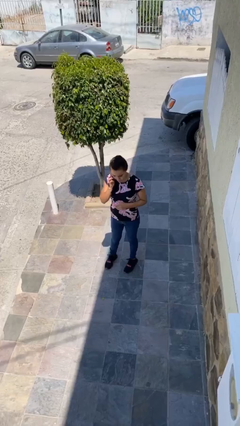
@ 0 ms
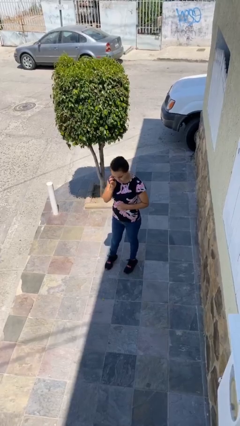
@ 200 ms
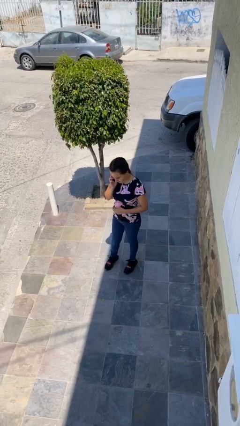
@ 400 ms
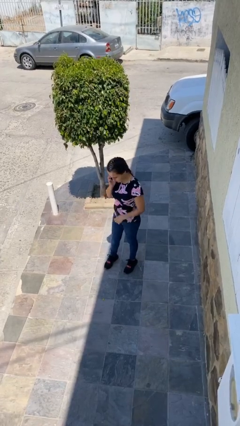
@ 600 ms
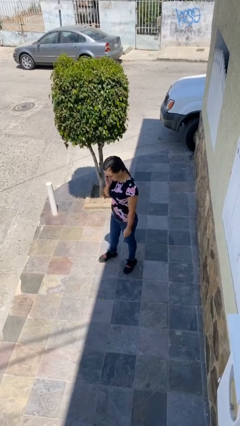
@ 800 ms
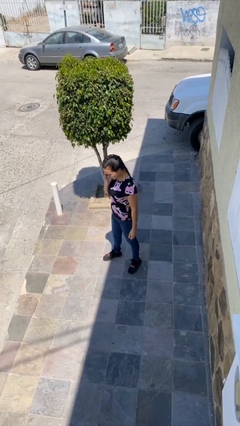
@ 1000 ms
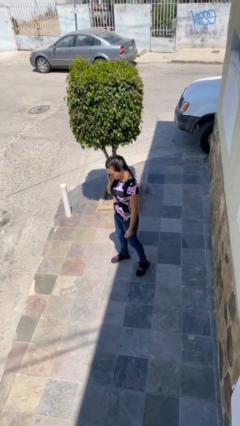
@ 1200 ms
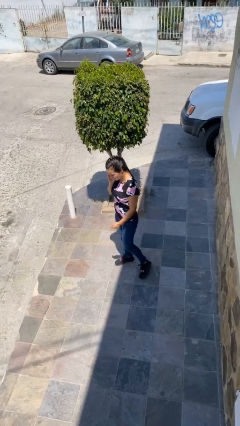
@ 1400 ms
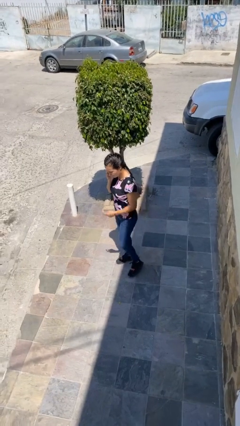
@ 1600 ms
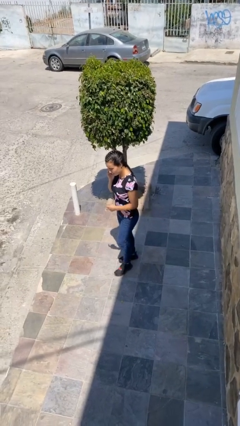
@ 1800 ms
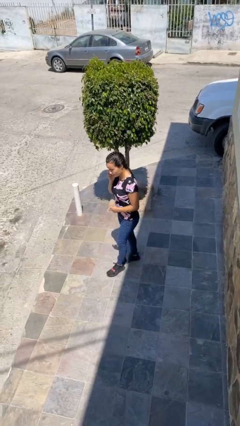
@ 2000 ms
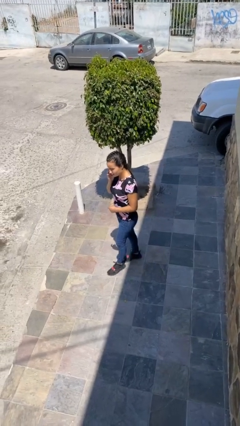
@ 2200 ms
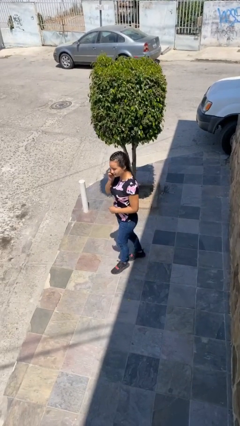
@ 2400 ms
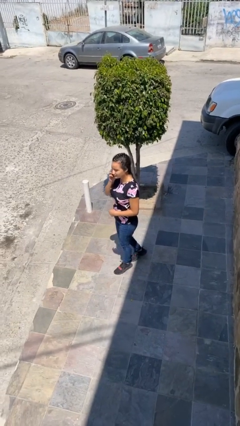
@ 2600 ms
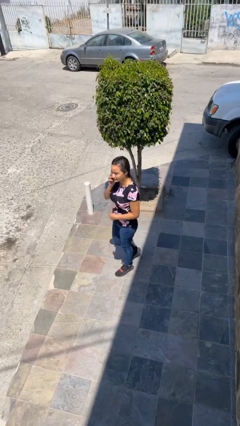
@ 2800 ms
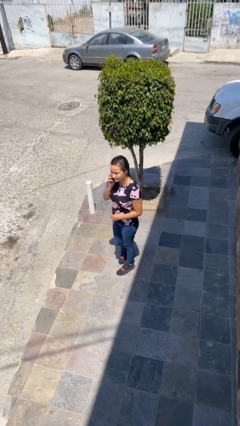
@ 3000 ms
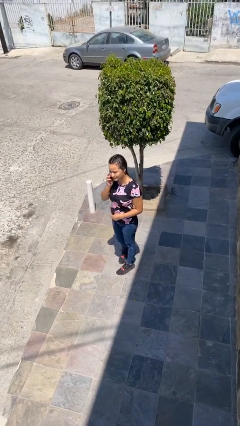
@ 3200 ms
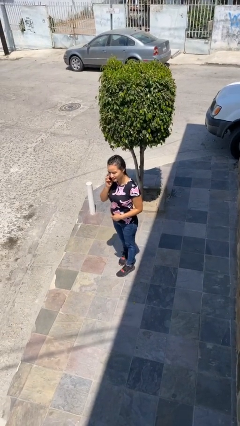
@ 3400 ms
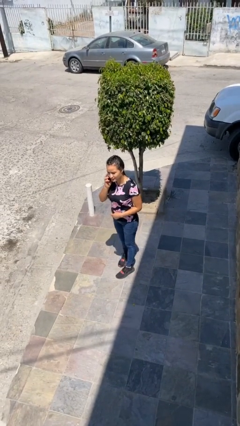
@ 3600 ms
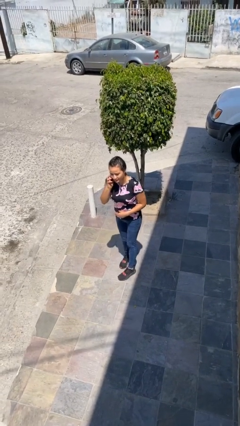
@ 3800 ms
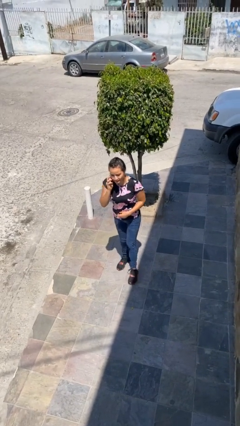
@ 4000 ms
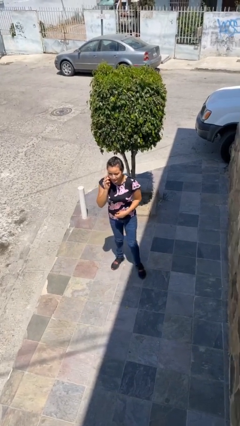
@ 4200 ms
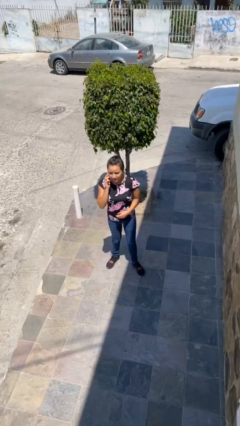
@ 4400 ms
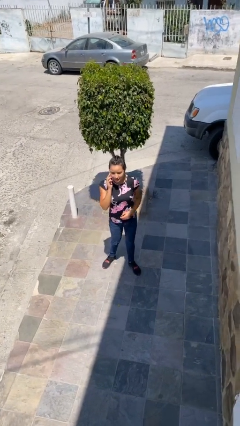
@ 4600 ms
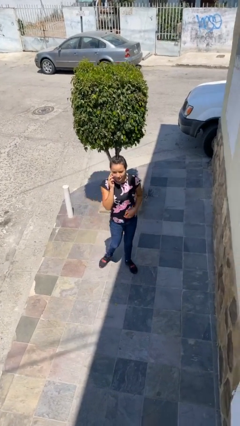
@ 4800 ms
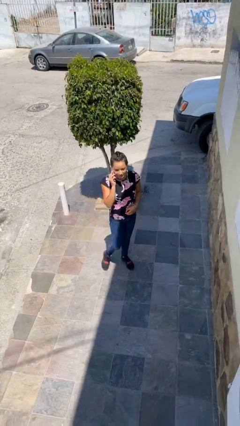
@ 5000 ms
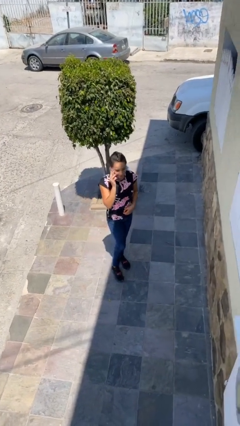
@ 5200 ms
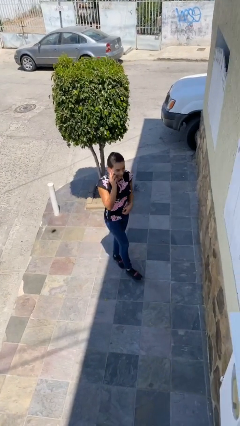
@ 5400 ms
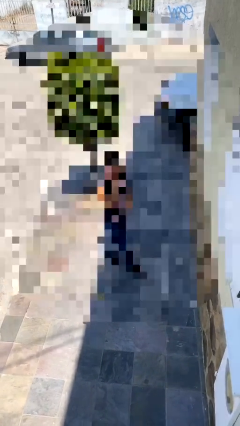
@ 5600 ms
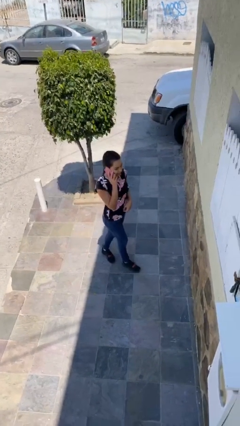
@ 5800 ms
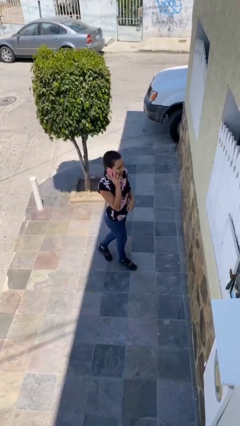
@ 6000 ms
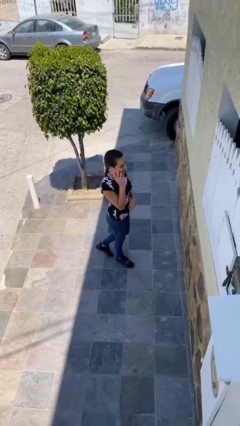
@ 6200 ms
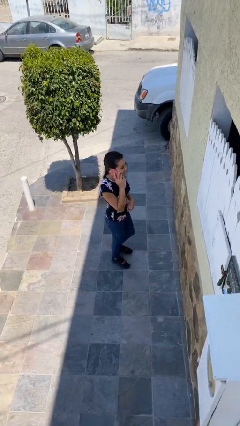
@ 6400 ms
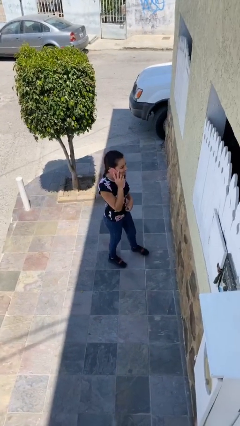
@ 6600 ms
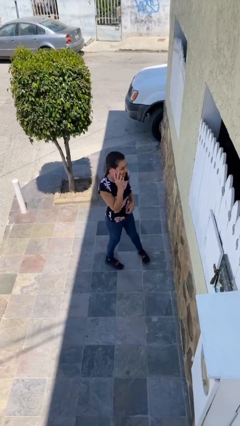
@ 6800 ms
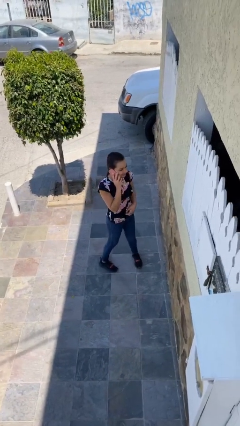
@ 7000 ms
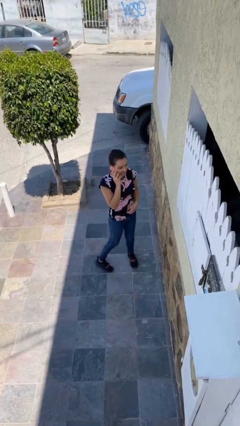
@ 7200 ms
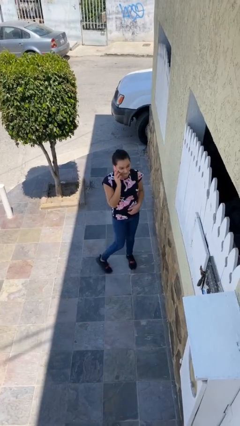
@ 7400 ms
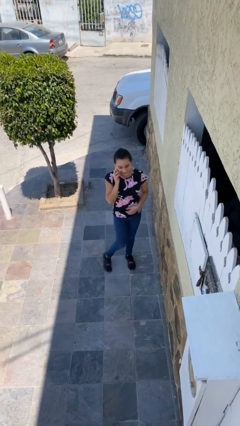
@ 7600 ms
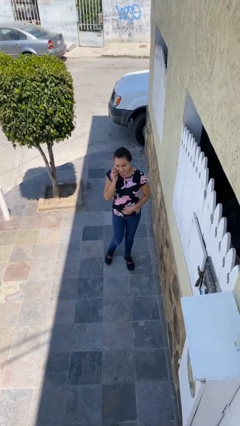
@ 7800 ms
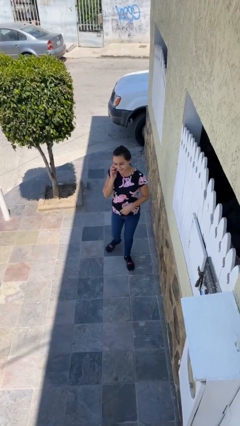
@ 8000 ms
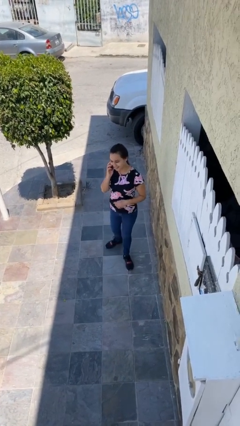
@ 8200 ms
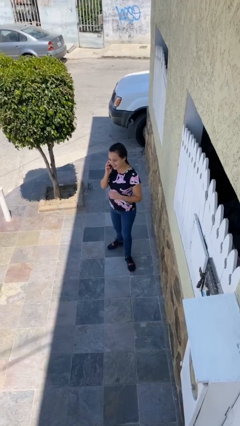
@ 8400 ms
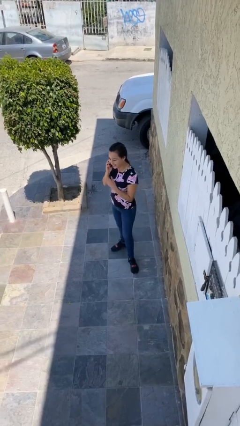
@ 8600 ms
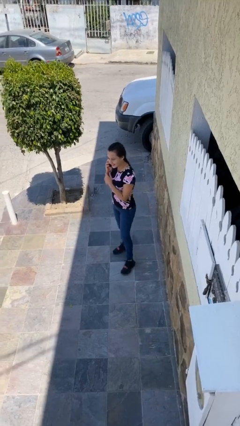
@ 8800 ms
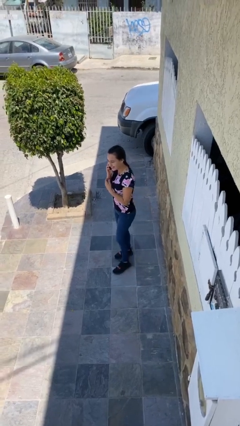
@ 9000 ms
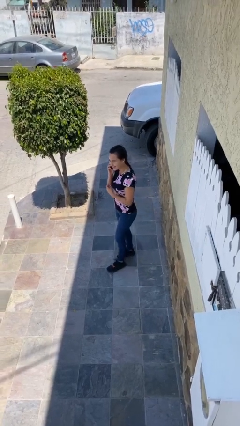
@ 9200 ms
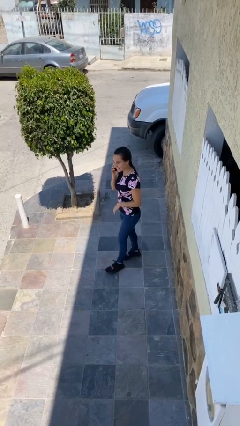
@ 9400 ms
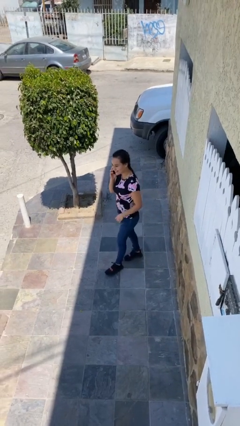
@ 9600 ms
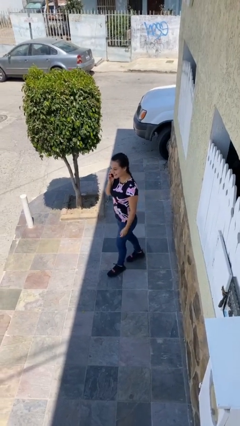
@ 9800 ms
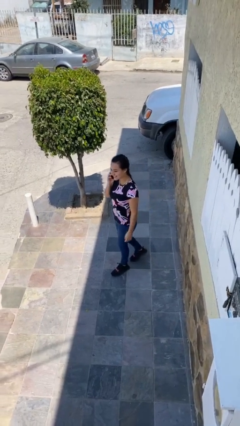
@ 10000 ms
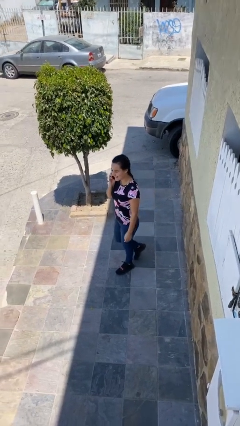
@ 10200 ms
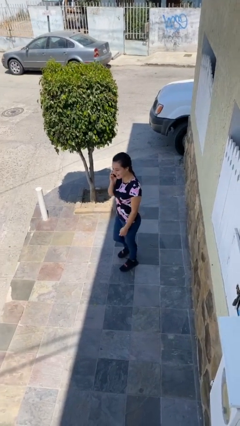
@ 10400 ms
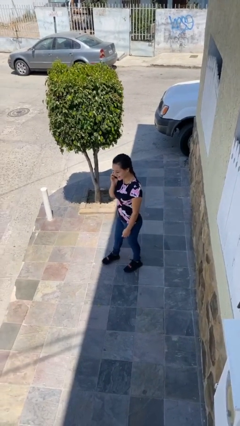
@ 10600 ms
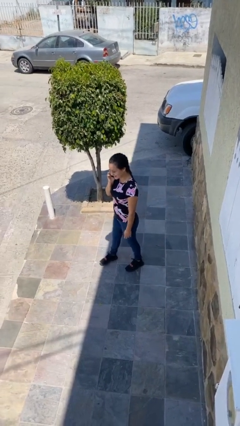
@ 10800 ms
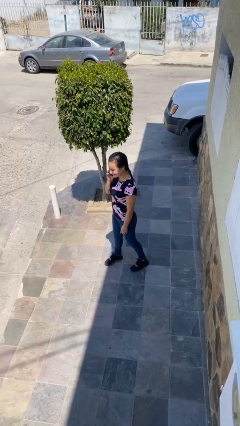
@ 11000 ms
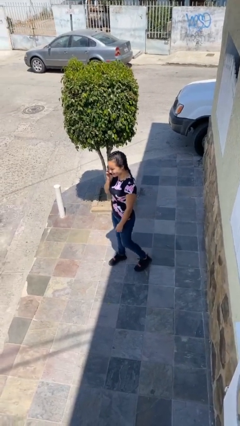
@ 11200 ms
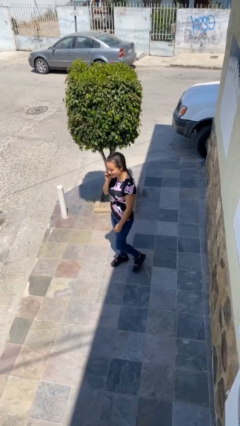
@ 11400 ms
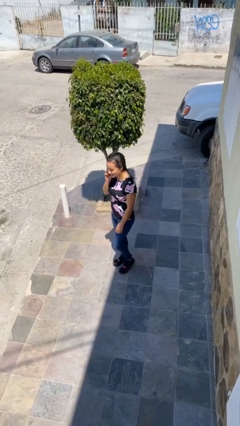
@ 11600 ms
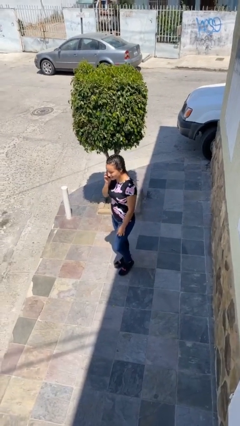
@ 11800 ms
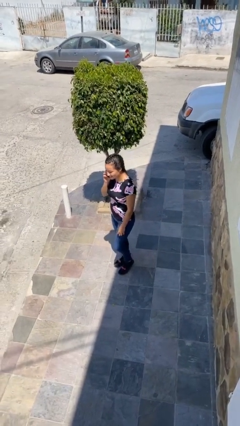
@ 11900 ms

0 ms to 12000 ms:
person talks on phone

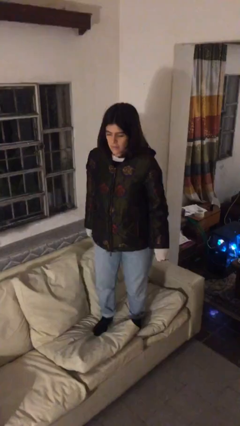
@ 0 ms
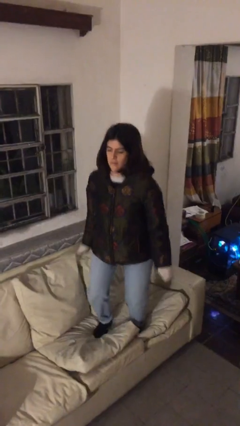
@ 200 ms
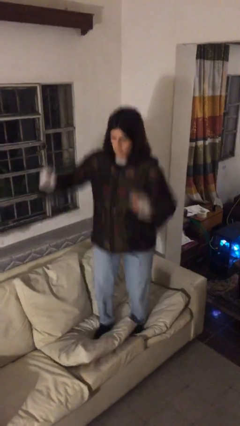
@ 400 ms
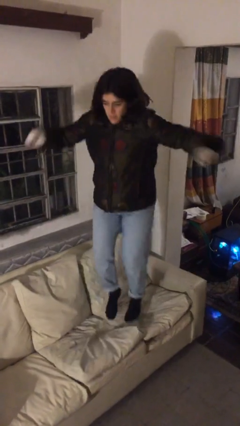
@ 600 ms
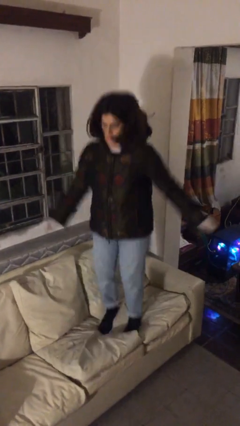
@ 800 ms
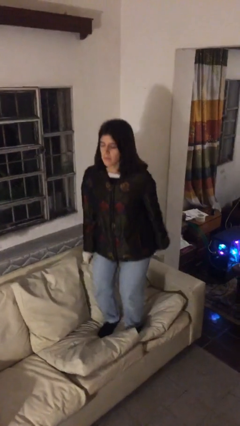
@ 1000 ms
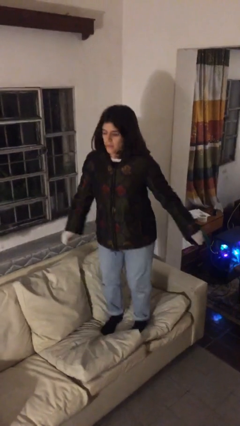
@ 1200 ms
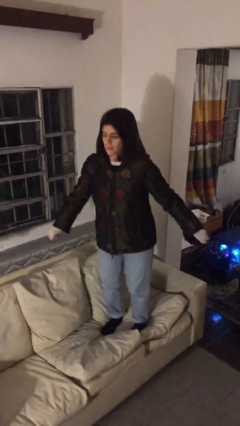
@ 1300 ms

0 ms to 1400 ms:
person jumps on couch

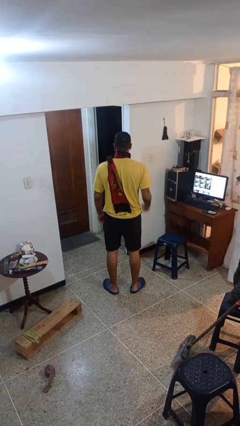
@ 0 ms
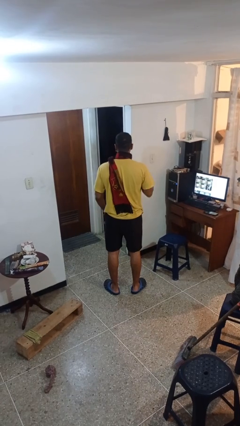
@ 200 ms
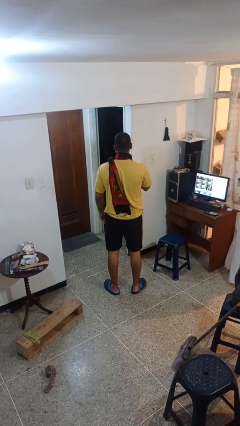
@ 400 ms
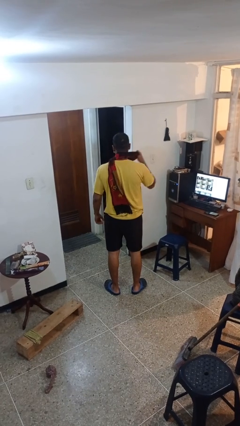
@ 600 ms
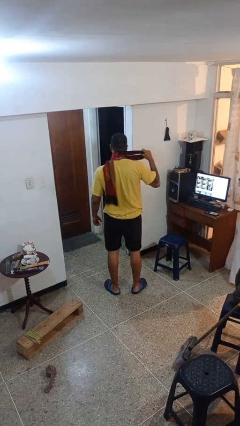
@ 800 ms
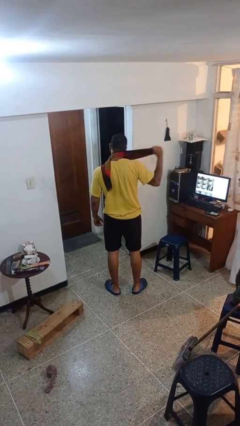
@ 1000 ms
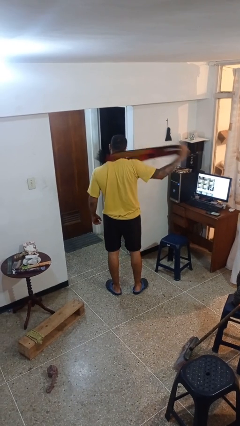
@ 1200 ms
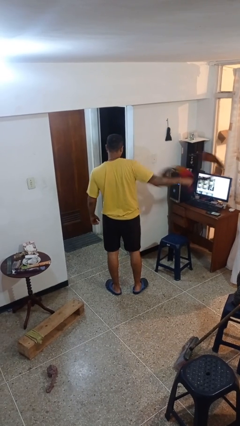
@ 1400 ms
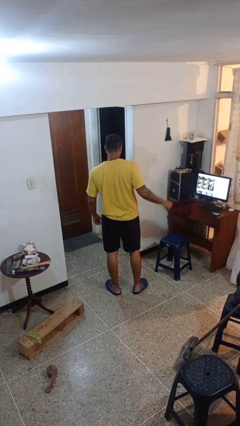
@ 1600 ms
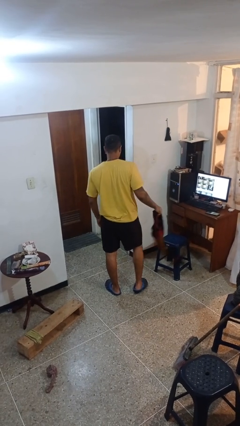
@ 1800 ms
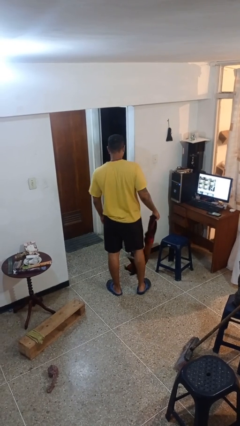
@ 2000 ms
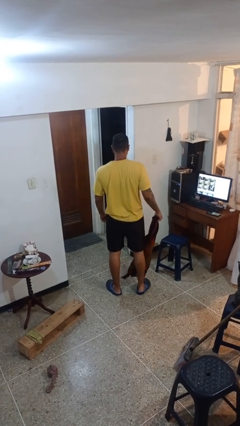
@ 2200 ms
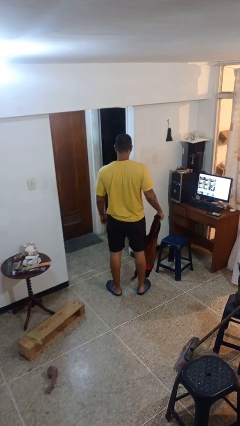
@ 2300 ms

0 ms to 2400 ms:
person takes off scarf

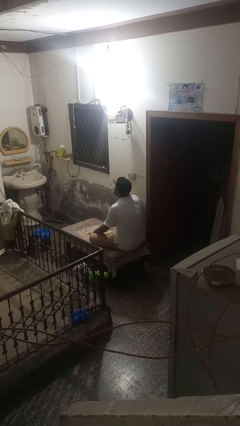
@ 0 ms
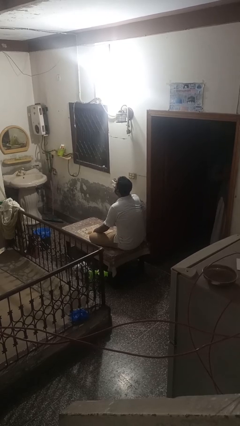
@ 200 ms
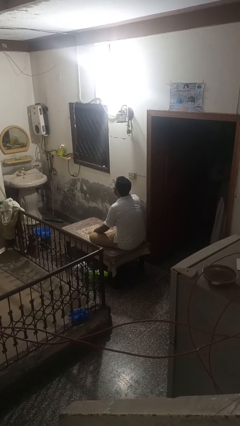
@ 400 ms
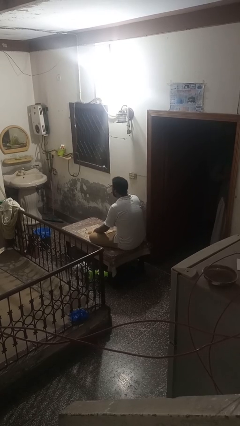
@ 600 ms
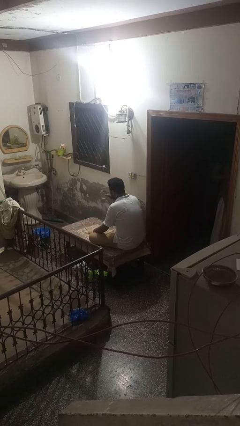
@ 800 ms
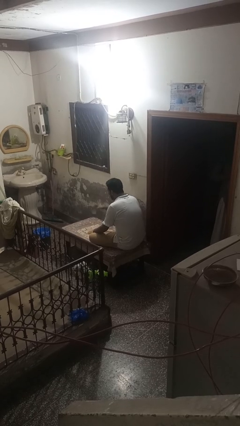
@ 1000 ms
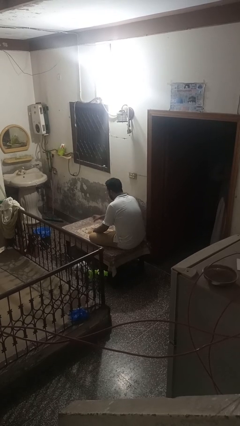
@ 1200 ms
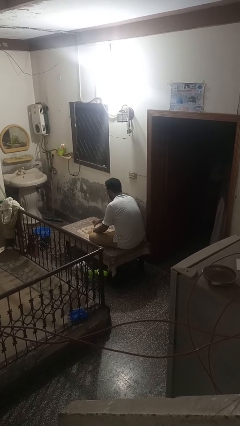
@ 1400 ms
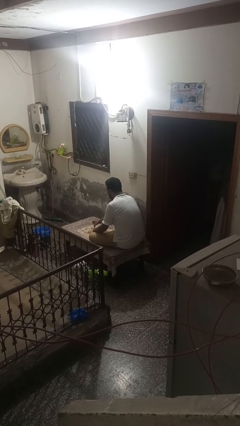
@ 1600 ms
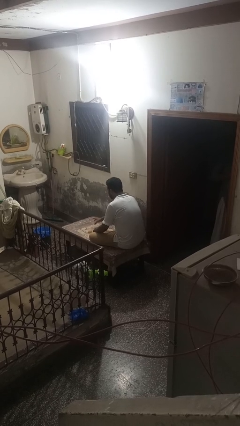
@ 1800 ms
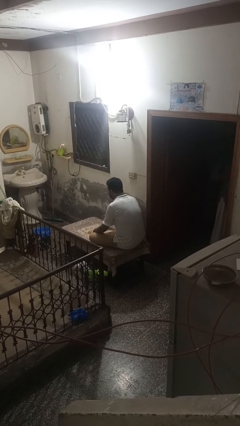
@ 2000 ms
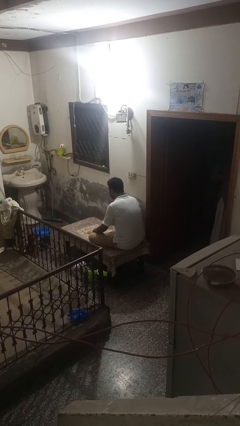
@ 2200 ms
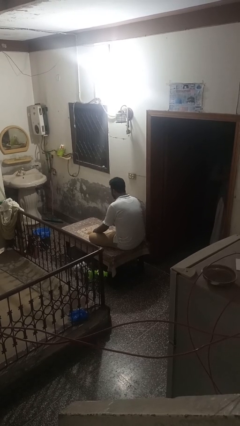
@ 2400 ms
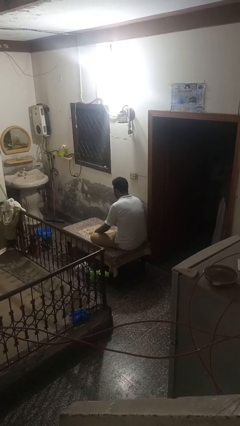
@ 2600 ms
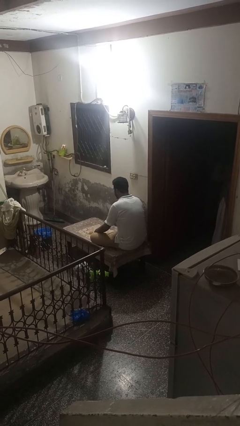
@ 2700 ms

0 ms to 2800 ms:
person puts down object on table
